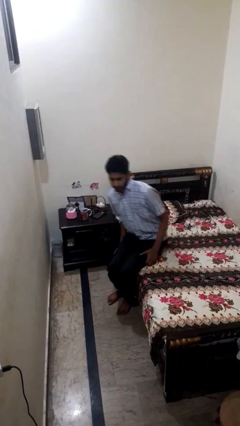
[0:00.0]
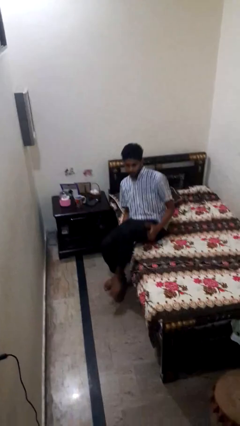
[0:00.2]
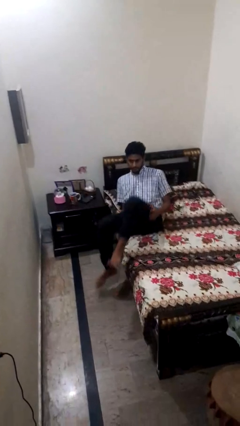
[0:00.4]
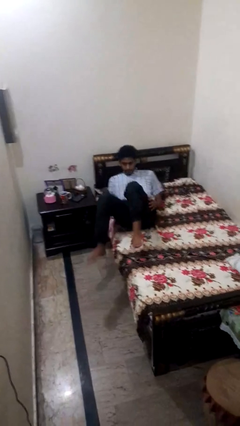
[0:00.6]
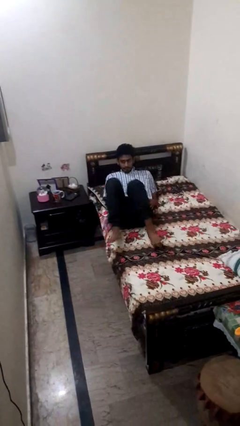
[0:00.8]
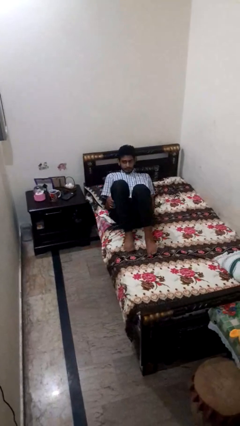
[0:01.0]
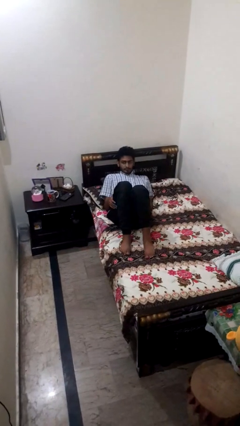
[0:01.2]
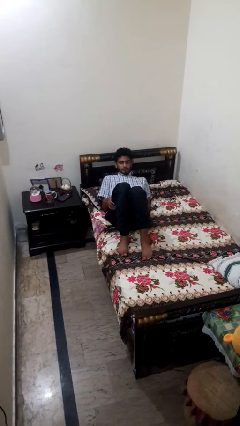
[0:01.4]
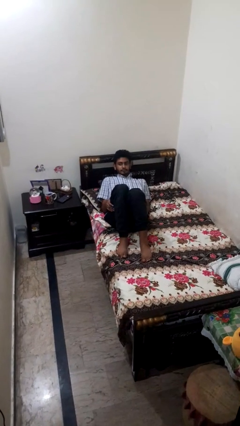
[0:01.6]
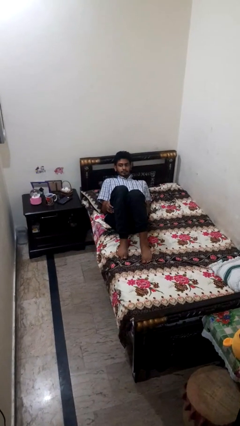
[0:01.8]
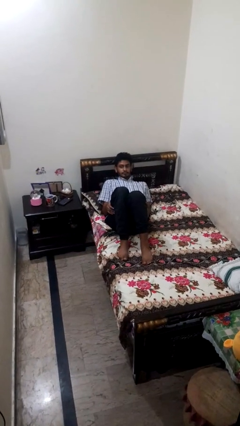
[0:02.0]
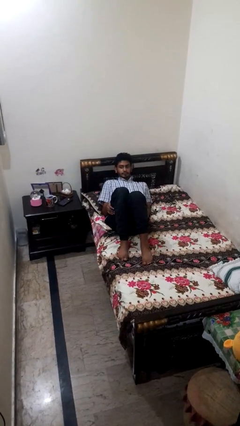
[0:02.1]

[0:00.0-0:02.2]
person lies down on bed

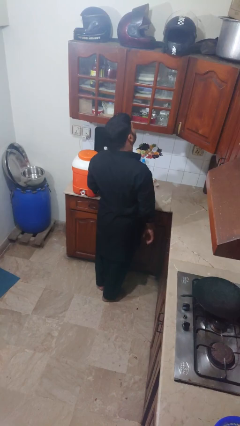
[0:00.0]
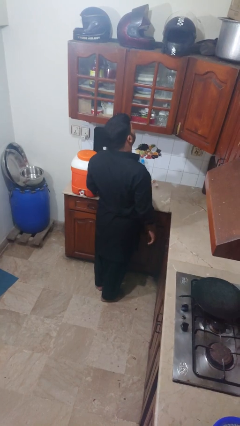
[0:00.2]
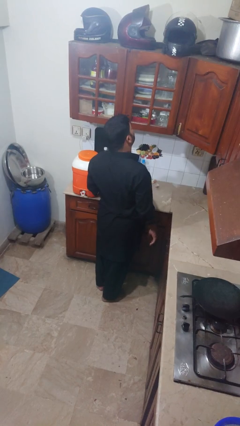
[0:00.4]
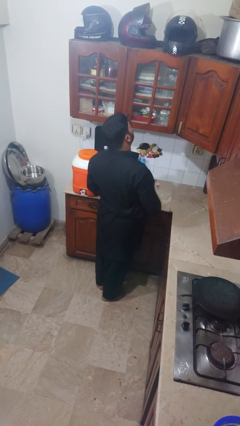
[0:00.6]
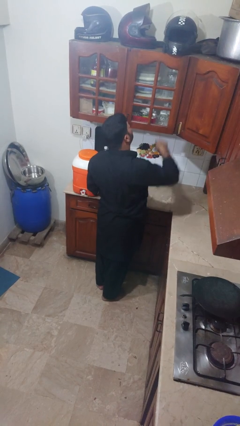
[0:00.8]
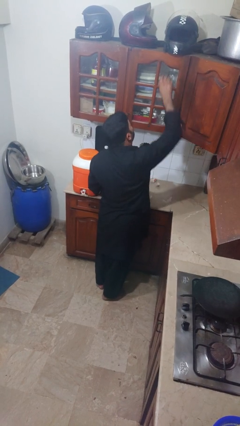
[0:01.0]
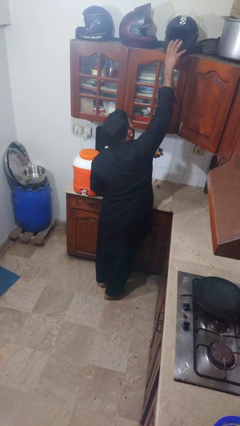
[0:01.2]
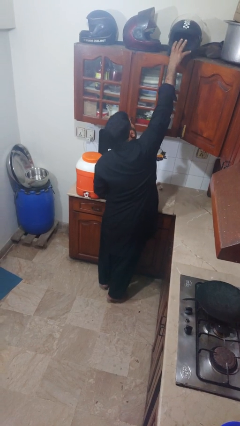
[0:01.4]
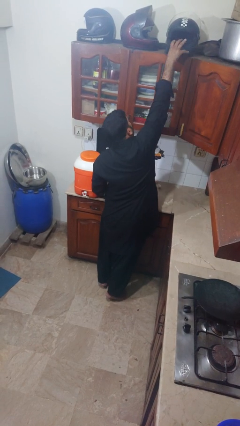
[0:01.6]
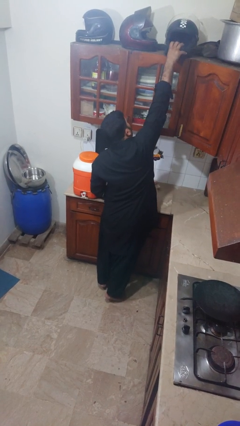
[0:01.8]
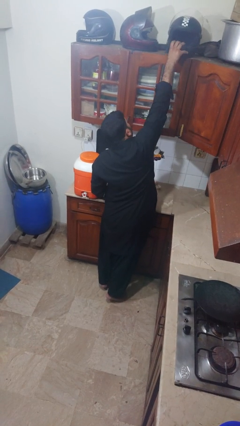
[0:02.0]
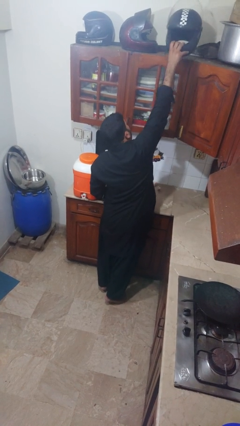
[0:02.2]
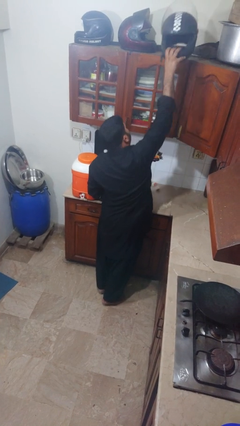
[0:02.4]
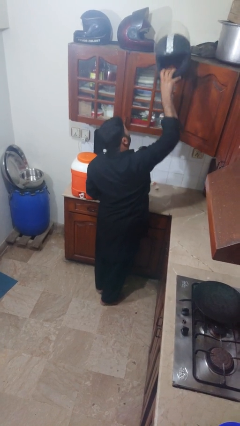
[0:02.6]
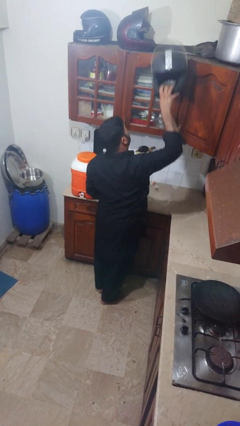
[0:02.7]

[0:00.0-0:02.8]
person picks up object from shelf

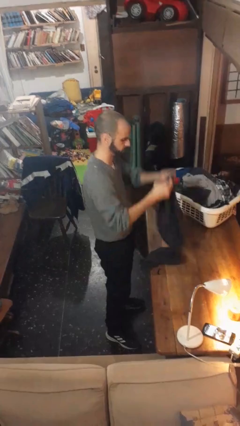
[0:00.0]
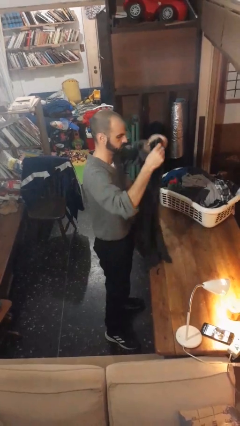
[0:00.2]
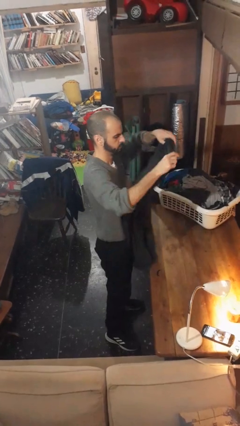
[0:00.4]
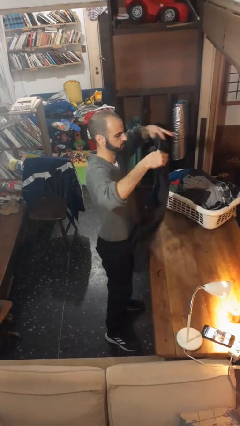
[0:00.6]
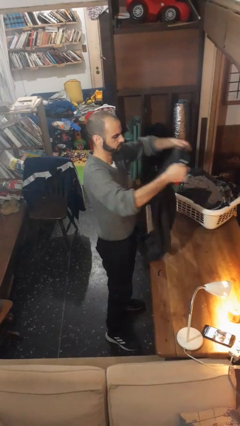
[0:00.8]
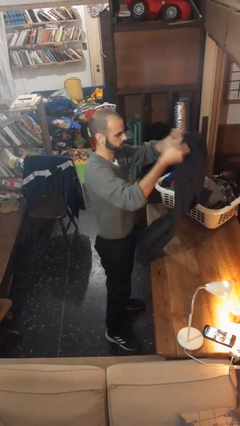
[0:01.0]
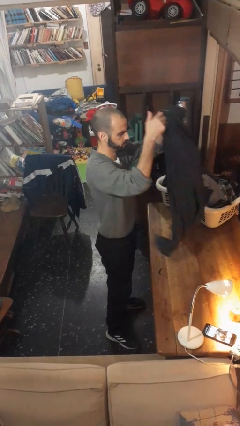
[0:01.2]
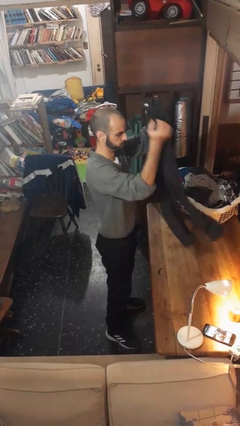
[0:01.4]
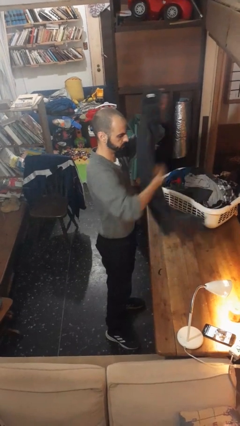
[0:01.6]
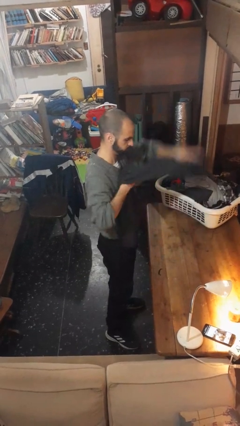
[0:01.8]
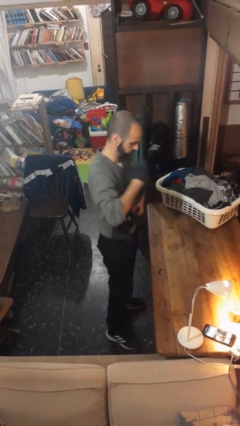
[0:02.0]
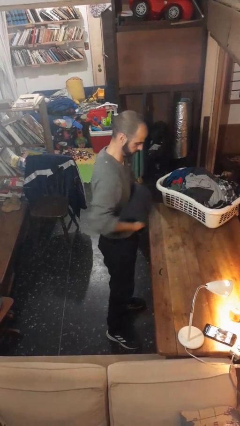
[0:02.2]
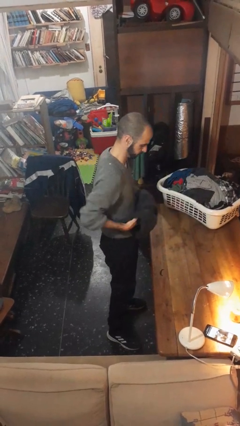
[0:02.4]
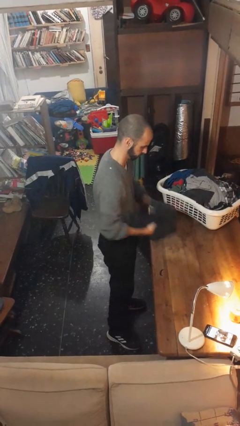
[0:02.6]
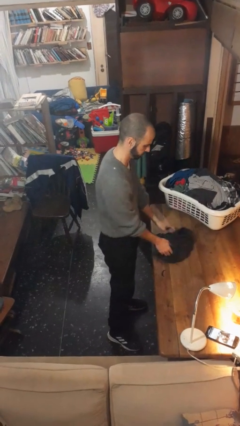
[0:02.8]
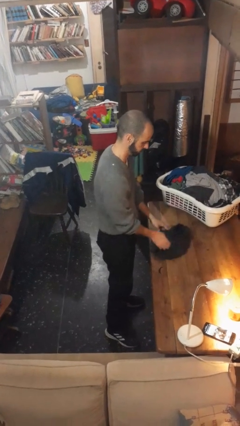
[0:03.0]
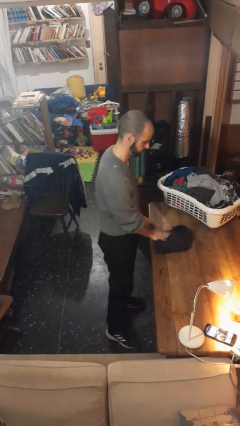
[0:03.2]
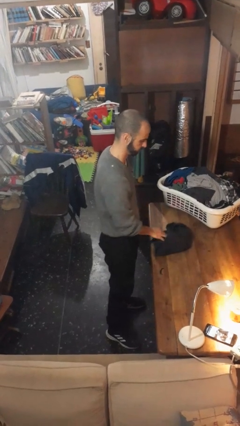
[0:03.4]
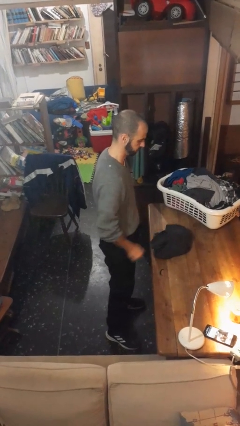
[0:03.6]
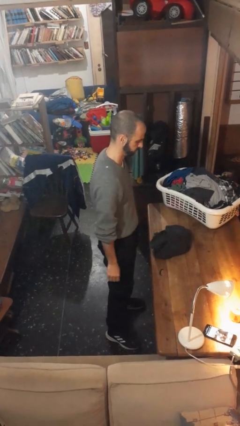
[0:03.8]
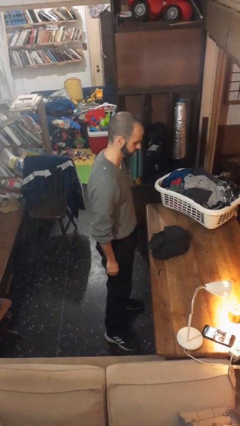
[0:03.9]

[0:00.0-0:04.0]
person folds pants

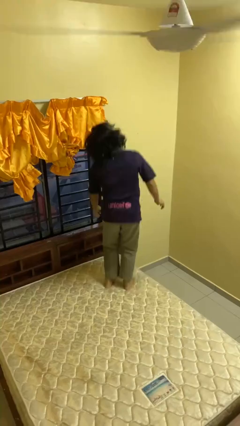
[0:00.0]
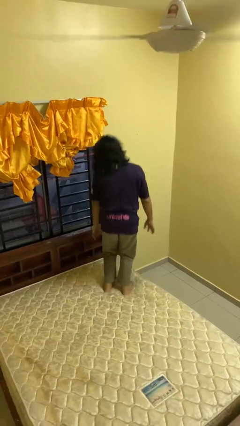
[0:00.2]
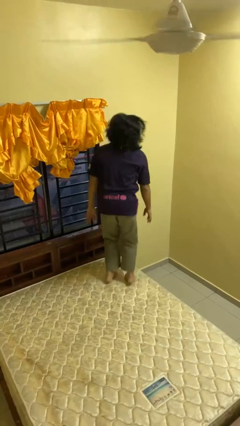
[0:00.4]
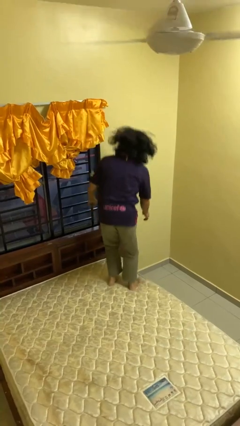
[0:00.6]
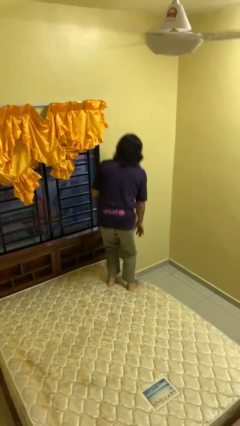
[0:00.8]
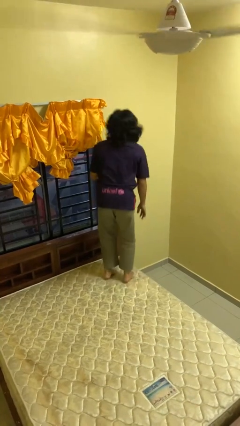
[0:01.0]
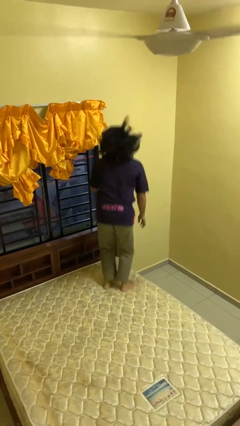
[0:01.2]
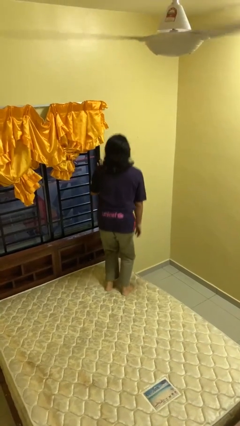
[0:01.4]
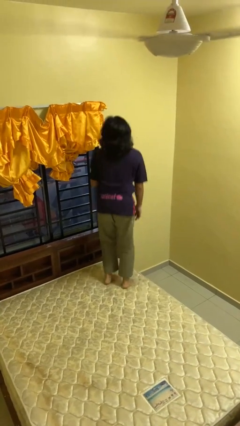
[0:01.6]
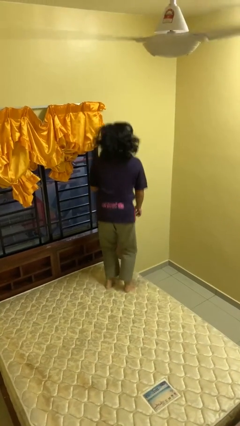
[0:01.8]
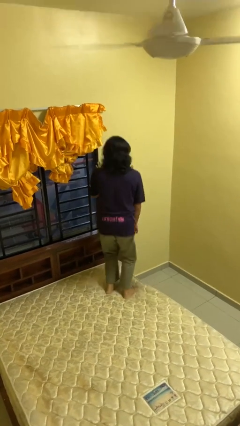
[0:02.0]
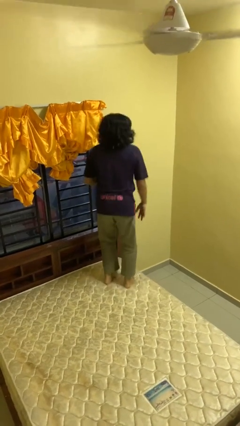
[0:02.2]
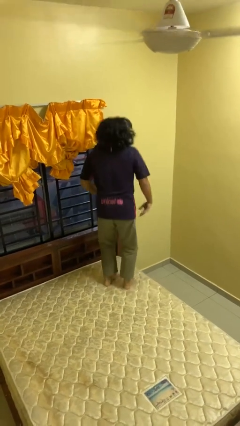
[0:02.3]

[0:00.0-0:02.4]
person jumps on bed

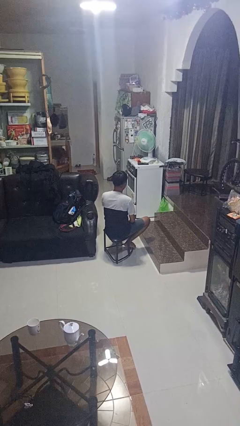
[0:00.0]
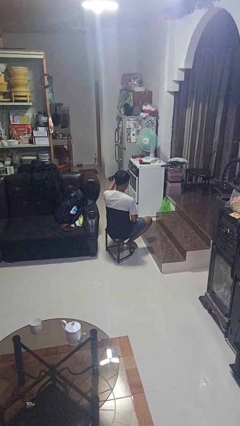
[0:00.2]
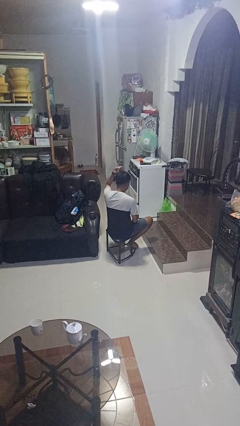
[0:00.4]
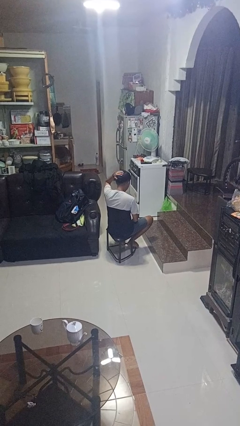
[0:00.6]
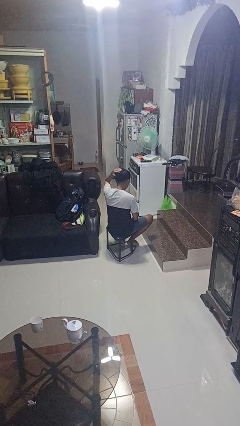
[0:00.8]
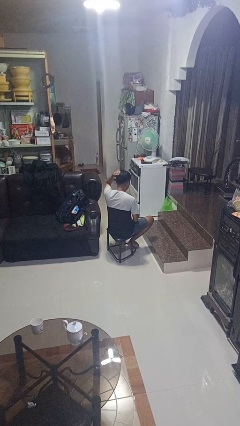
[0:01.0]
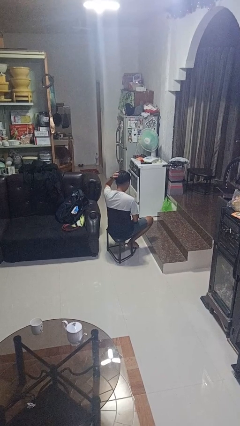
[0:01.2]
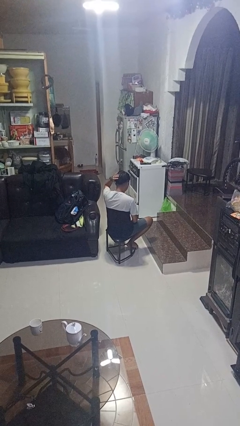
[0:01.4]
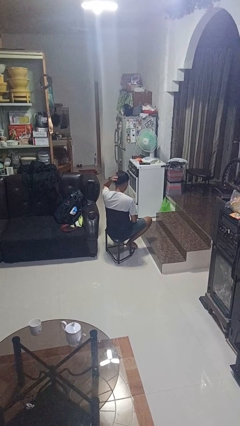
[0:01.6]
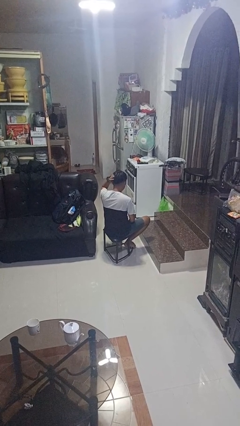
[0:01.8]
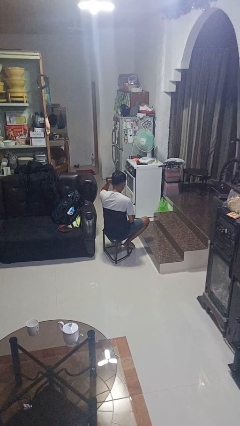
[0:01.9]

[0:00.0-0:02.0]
person pats head

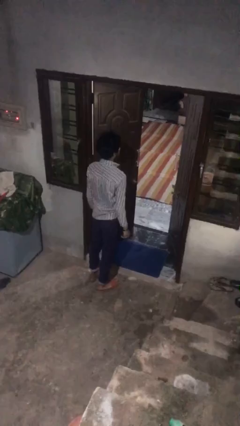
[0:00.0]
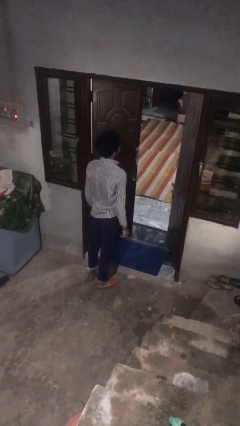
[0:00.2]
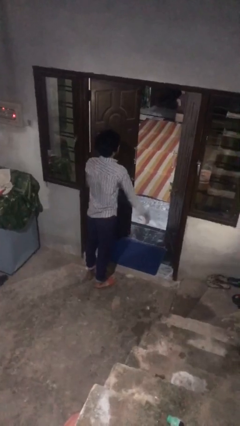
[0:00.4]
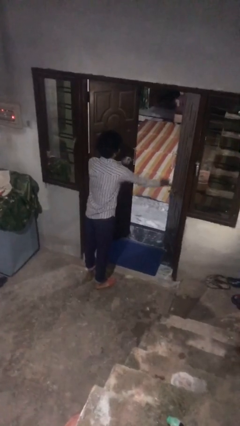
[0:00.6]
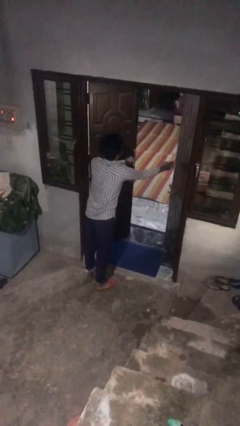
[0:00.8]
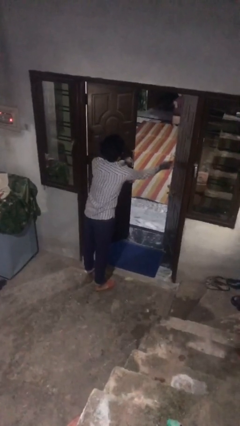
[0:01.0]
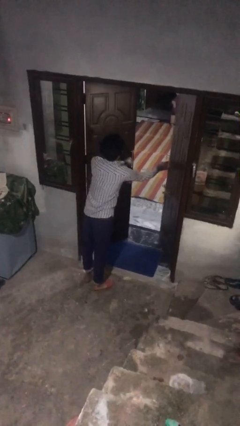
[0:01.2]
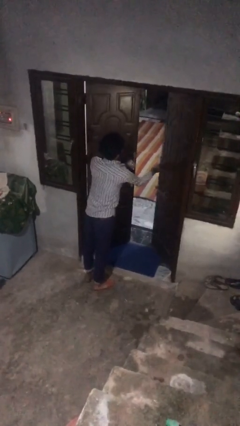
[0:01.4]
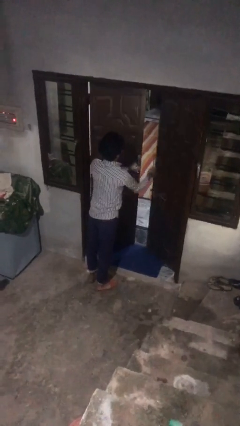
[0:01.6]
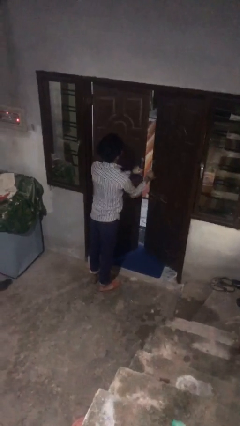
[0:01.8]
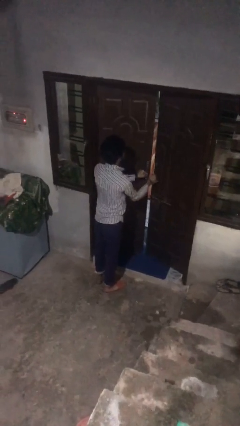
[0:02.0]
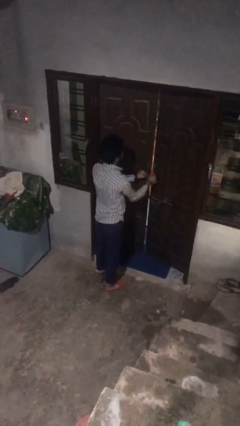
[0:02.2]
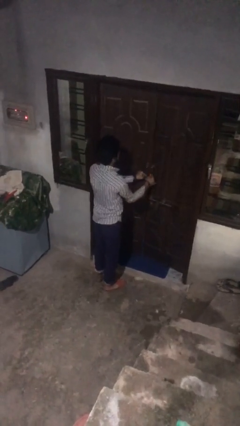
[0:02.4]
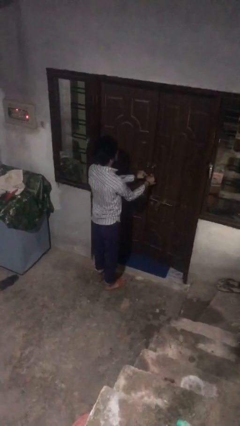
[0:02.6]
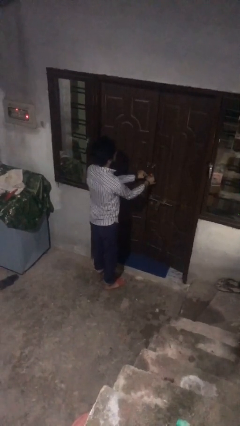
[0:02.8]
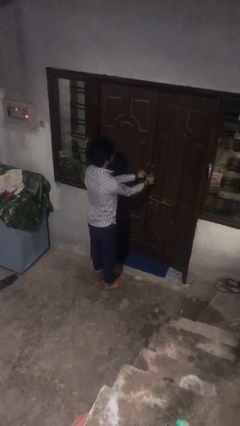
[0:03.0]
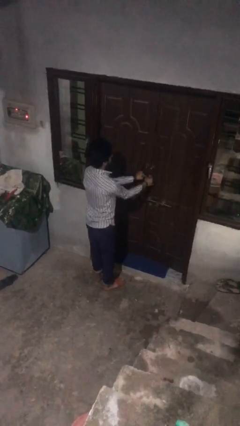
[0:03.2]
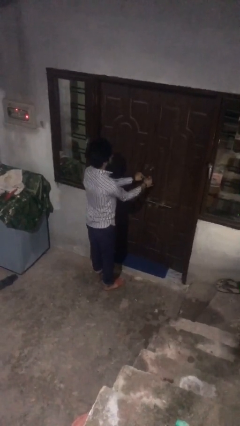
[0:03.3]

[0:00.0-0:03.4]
person closes facility door

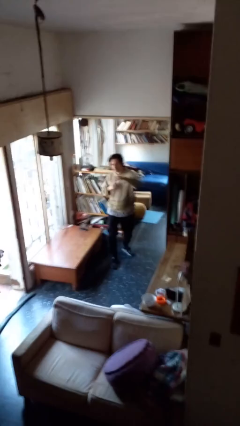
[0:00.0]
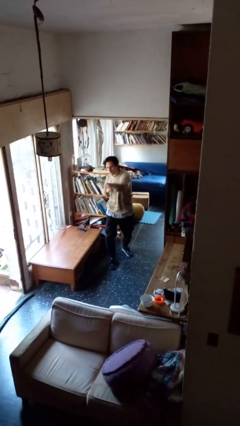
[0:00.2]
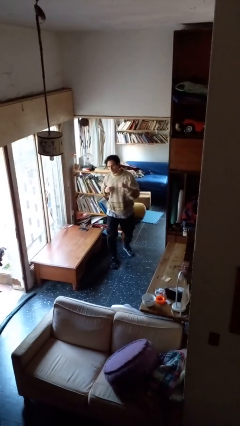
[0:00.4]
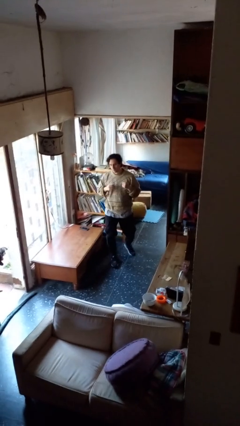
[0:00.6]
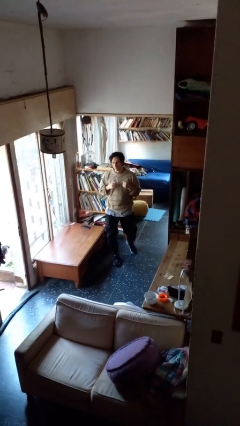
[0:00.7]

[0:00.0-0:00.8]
person karate chop
